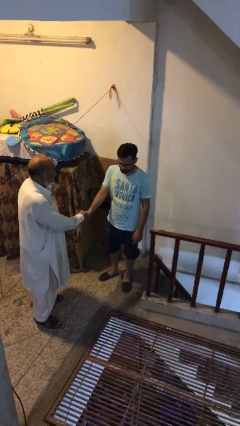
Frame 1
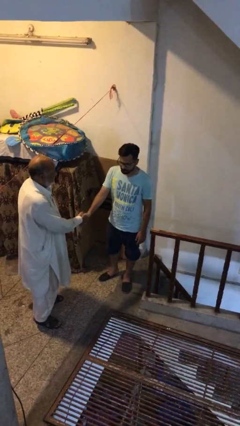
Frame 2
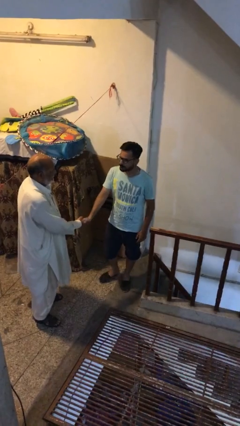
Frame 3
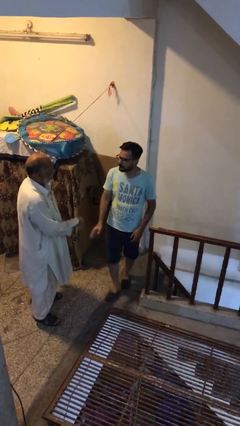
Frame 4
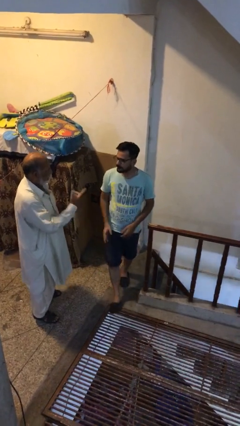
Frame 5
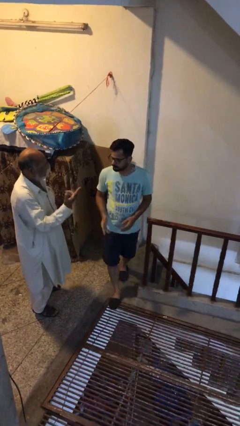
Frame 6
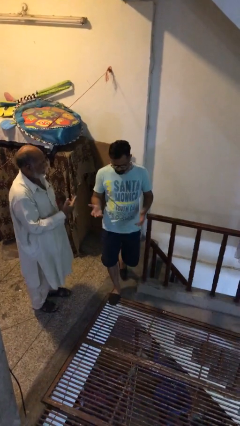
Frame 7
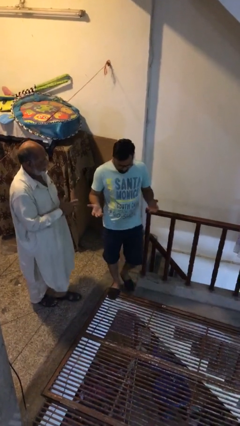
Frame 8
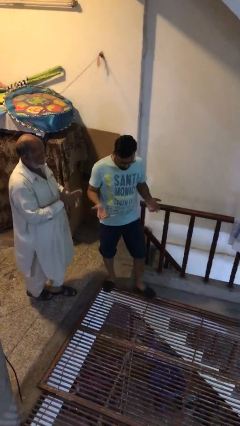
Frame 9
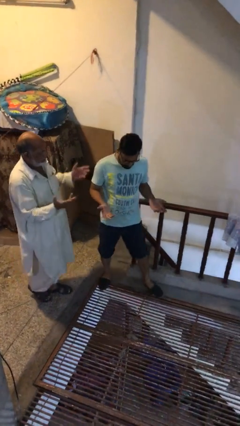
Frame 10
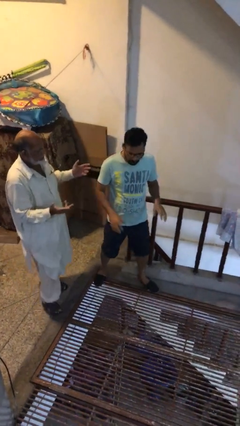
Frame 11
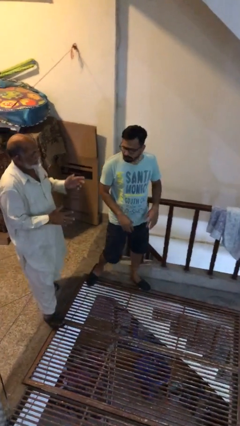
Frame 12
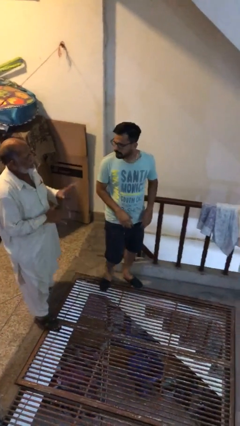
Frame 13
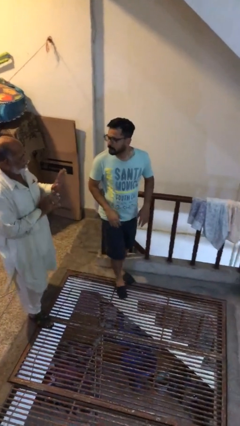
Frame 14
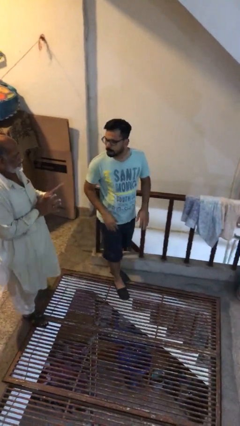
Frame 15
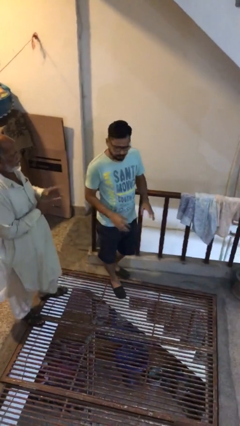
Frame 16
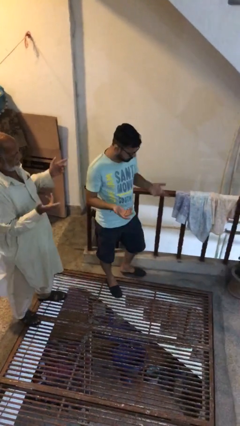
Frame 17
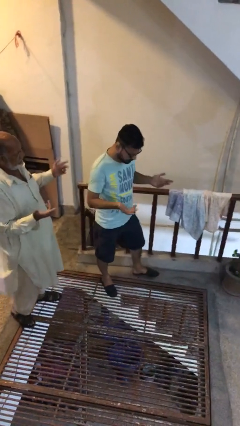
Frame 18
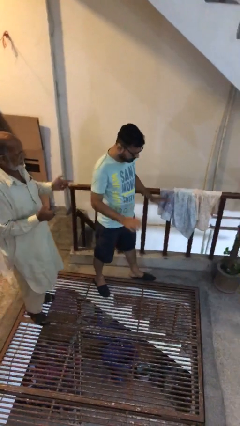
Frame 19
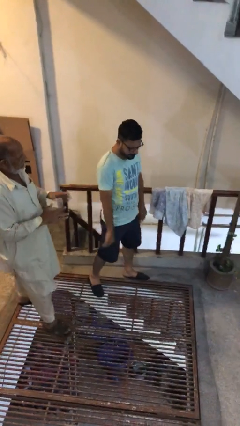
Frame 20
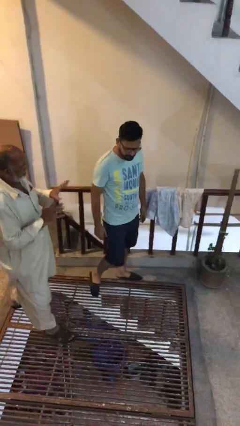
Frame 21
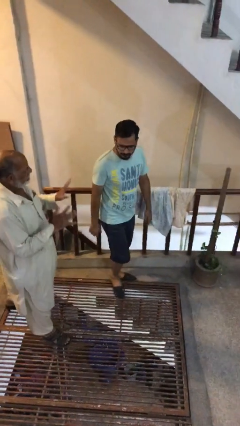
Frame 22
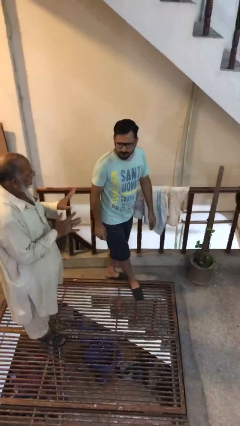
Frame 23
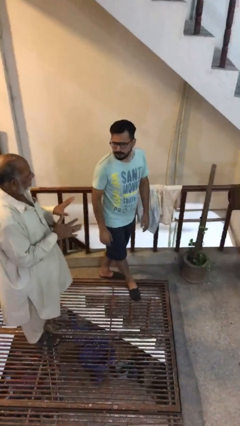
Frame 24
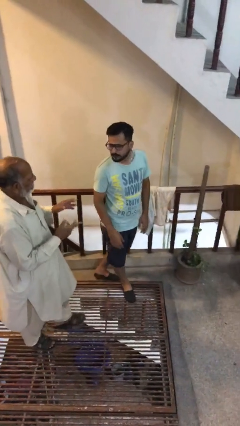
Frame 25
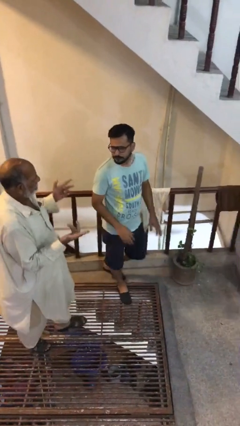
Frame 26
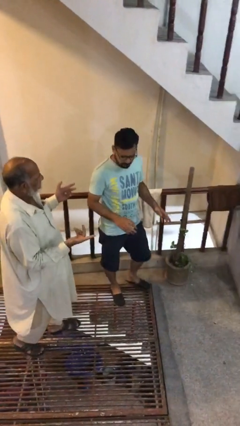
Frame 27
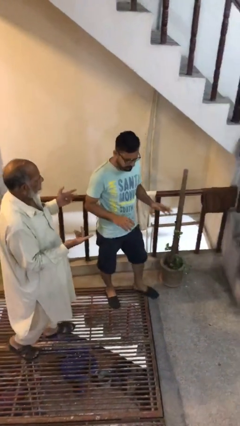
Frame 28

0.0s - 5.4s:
person talks to person

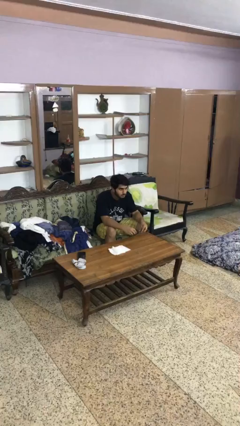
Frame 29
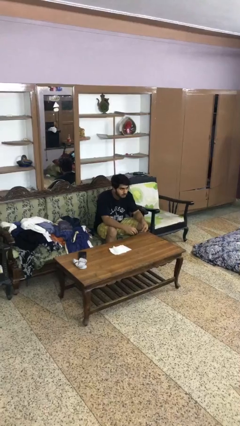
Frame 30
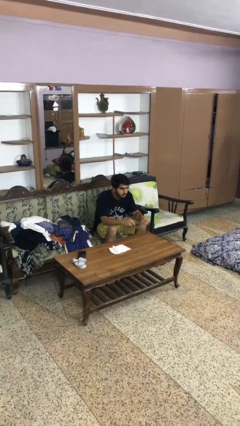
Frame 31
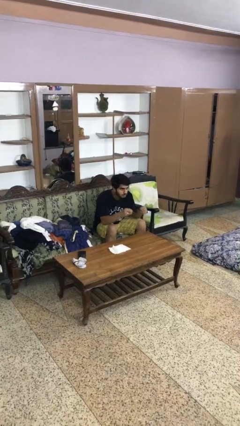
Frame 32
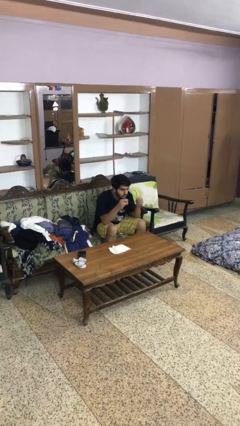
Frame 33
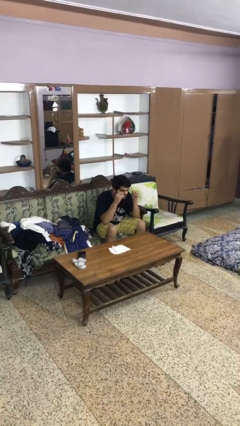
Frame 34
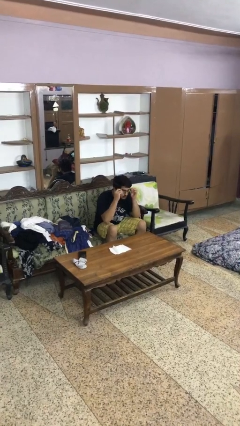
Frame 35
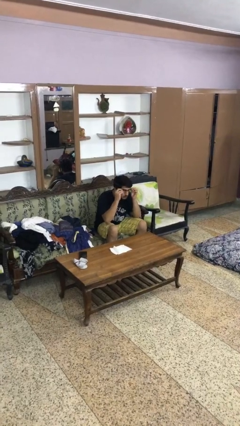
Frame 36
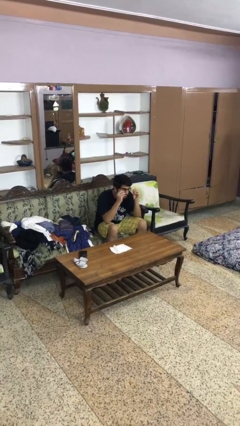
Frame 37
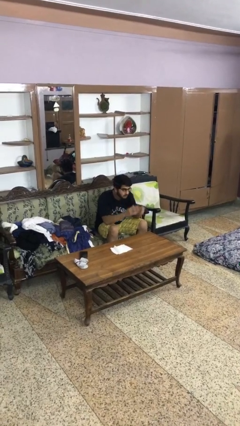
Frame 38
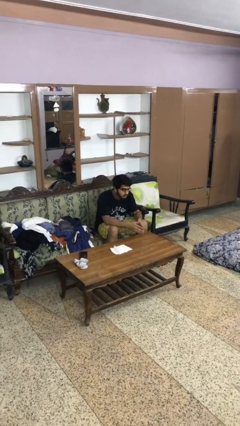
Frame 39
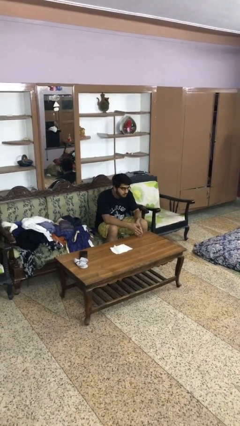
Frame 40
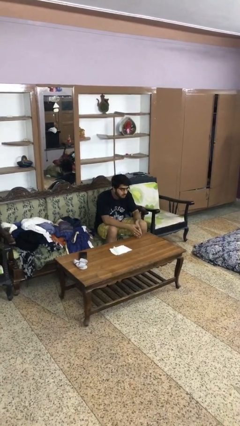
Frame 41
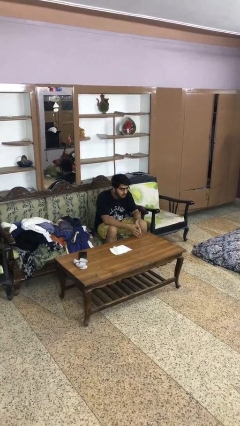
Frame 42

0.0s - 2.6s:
person puts on glasses

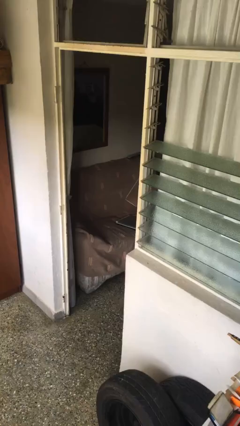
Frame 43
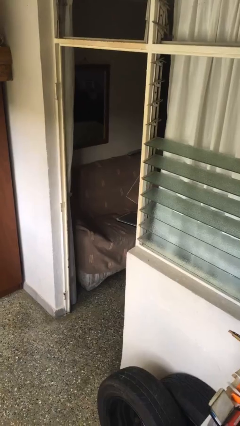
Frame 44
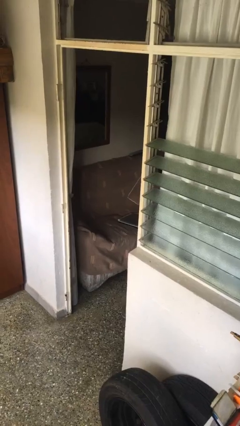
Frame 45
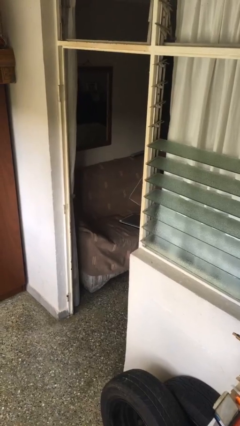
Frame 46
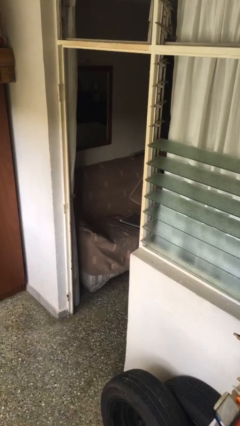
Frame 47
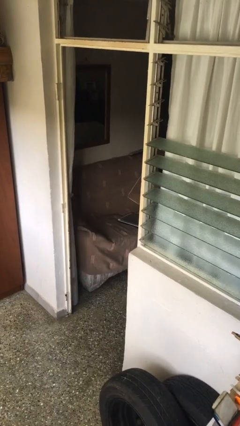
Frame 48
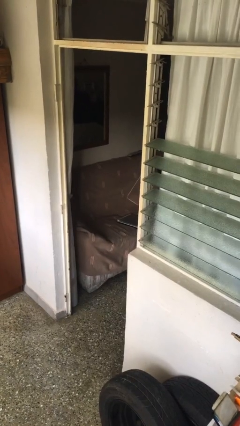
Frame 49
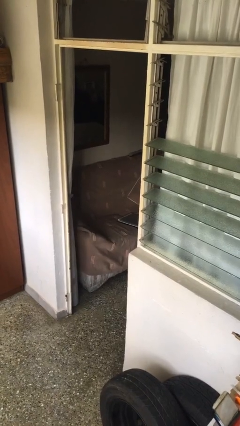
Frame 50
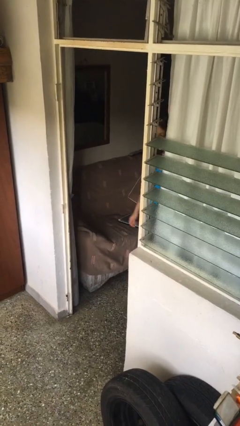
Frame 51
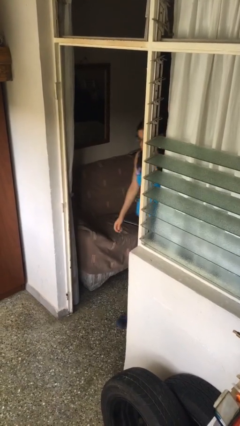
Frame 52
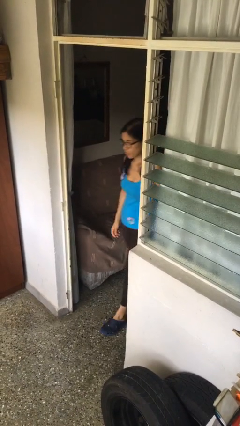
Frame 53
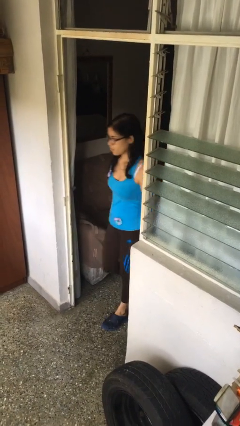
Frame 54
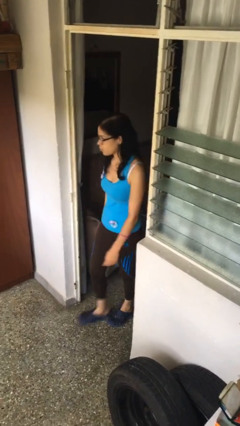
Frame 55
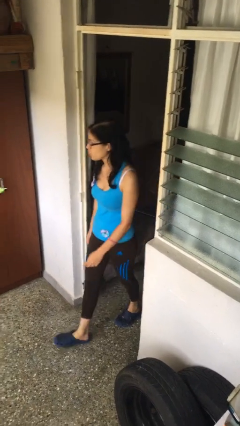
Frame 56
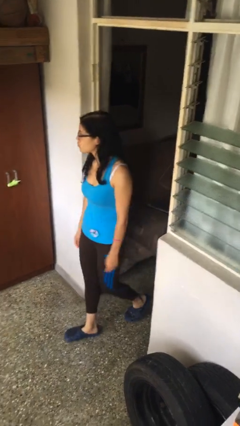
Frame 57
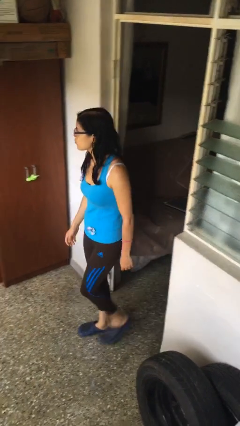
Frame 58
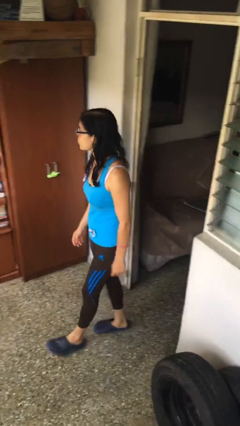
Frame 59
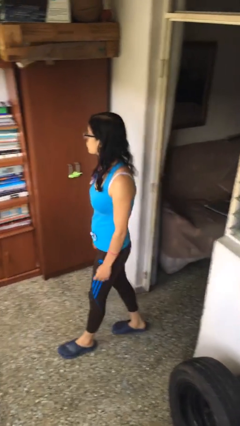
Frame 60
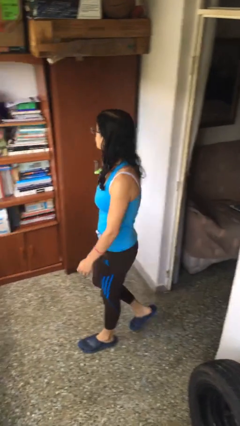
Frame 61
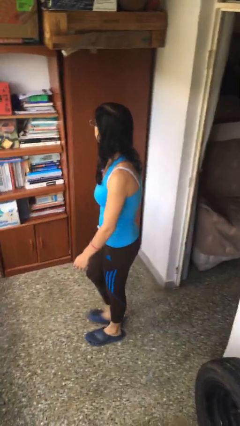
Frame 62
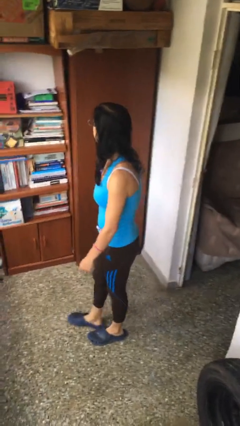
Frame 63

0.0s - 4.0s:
person enters scene through structure

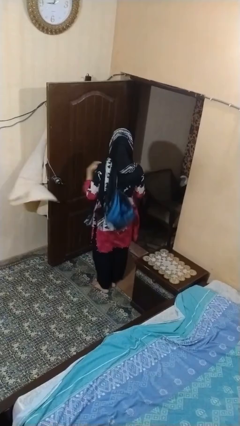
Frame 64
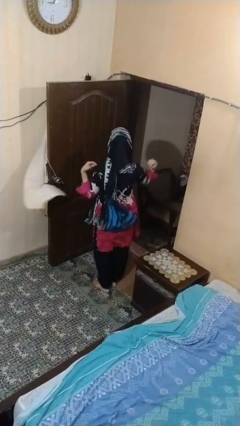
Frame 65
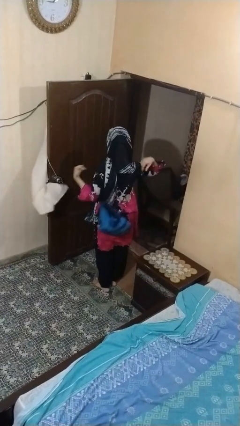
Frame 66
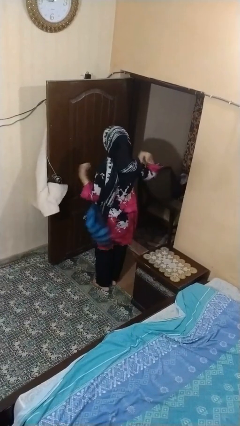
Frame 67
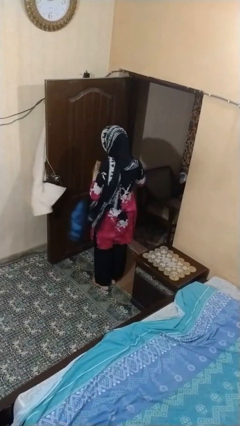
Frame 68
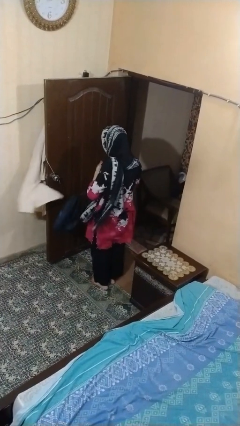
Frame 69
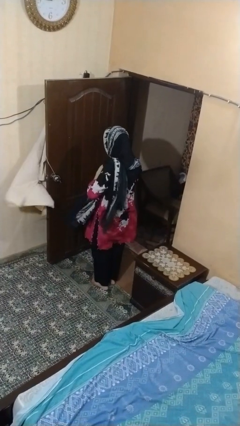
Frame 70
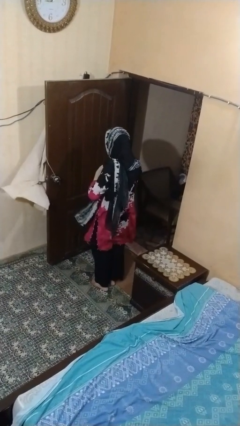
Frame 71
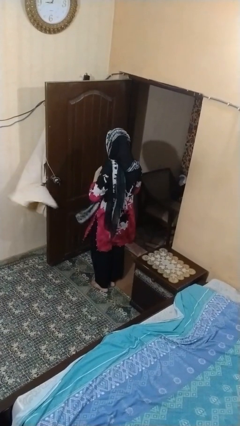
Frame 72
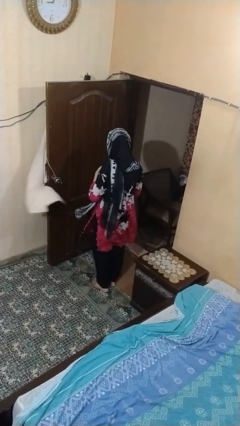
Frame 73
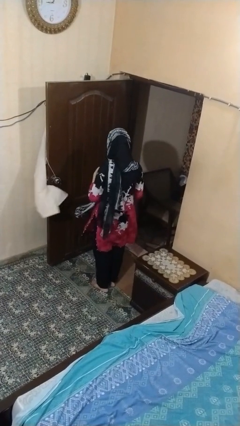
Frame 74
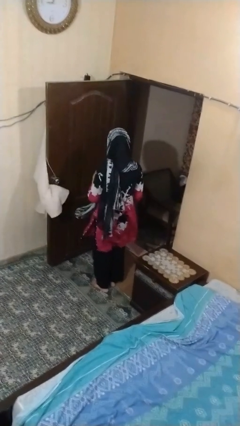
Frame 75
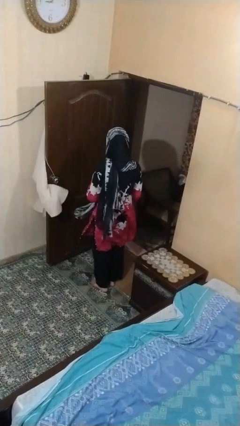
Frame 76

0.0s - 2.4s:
person takes off backpack

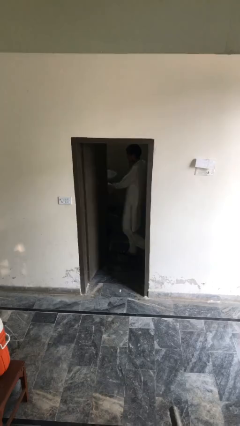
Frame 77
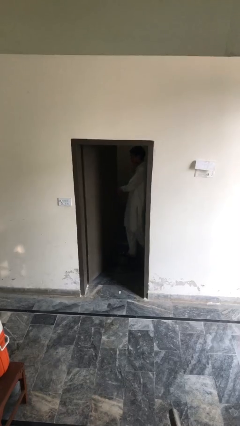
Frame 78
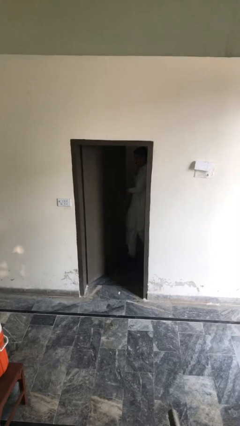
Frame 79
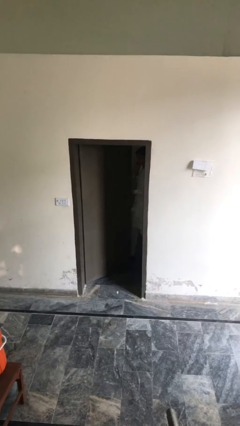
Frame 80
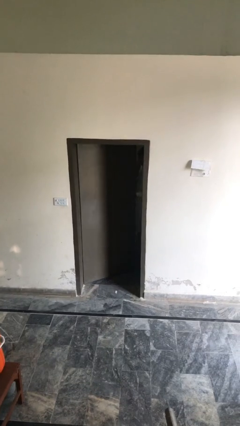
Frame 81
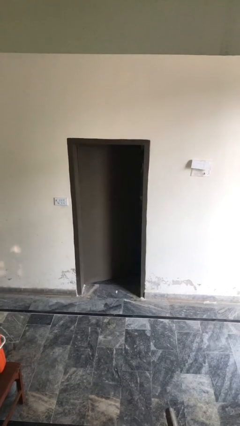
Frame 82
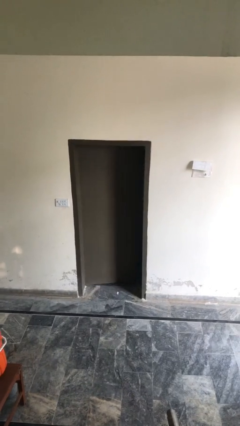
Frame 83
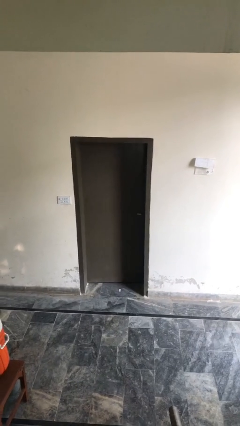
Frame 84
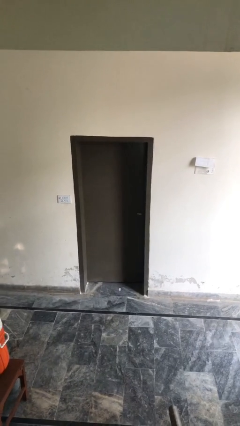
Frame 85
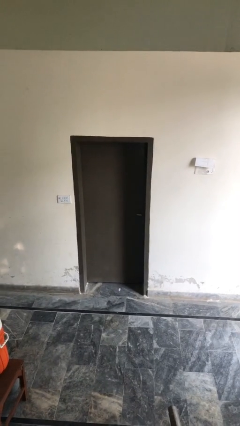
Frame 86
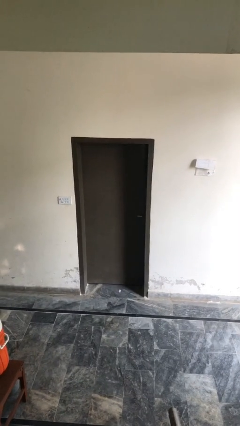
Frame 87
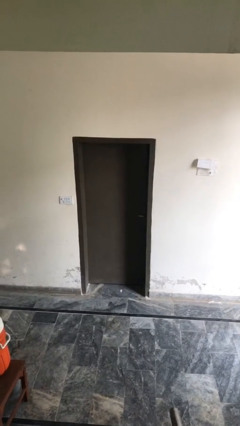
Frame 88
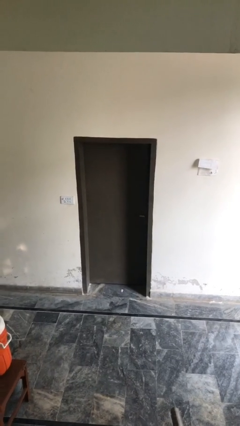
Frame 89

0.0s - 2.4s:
person closes facility door

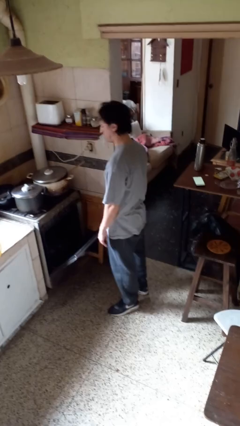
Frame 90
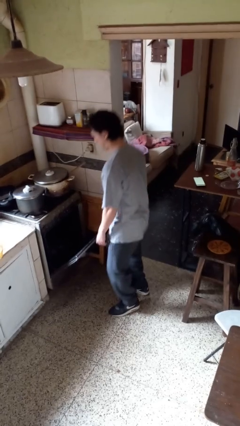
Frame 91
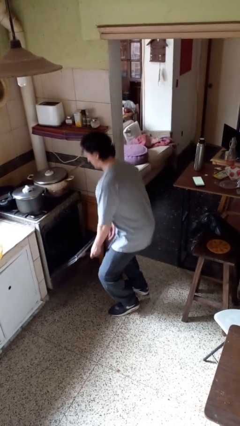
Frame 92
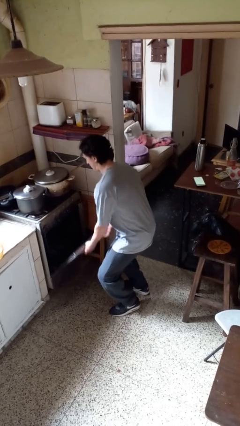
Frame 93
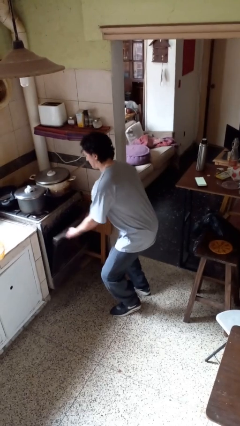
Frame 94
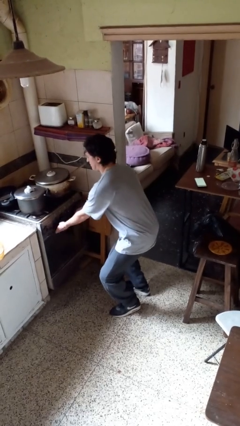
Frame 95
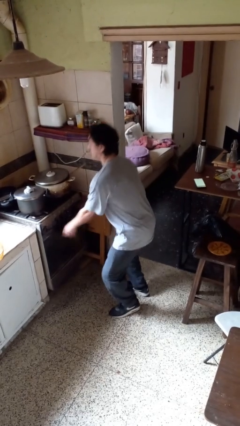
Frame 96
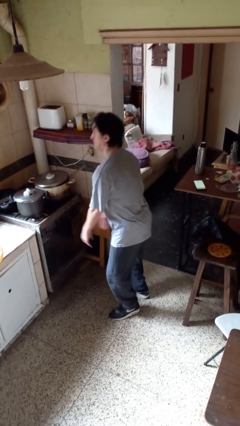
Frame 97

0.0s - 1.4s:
person closes oven door
